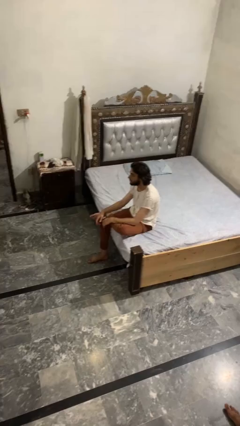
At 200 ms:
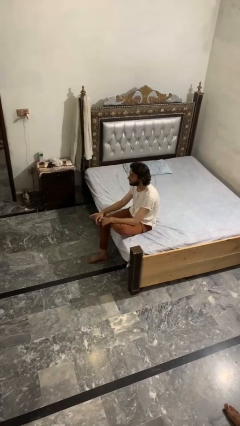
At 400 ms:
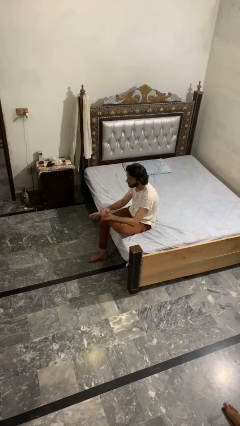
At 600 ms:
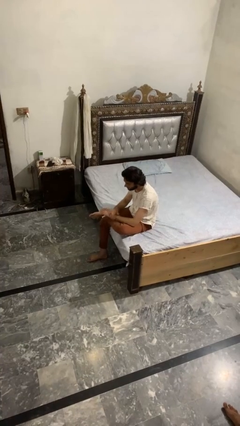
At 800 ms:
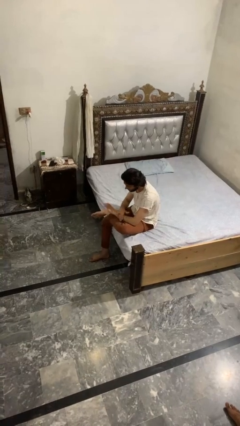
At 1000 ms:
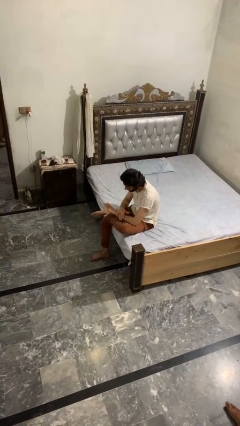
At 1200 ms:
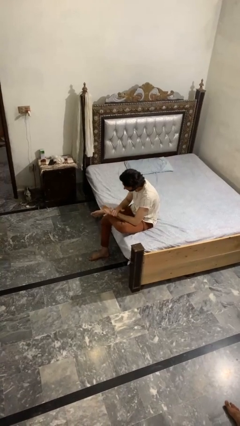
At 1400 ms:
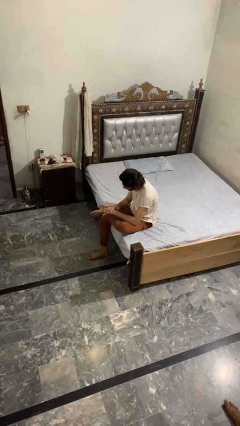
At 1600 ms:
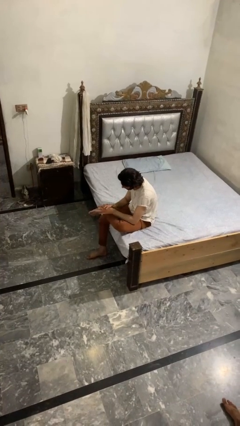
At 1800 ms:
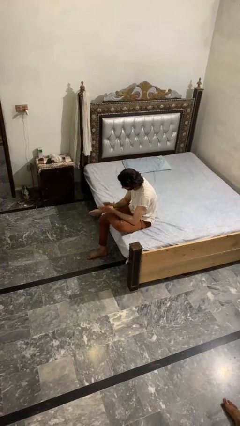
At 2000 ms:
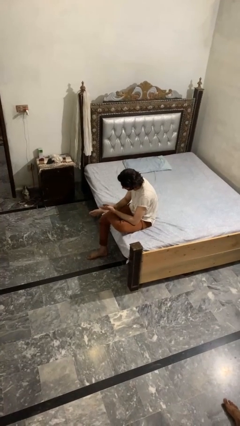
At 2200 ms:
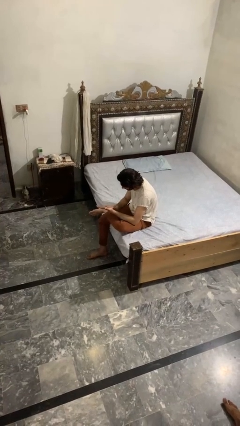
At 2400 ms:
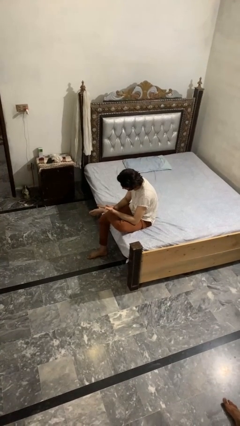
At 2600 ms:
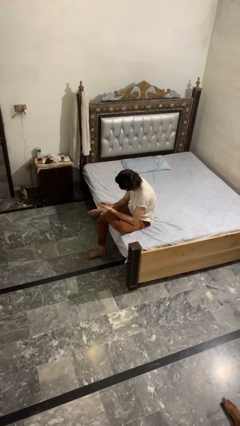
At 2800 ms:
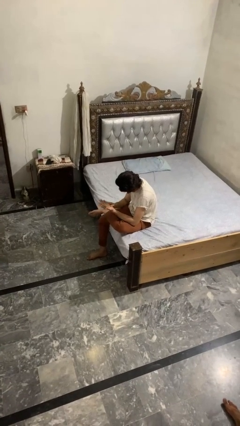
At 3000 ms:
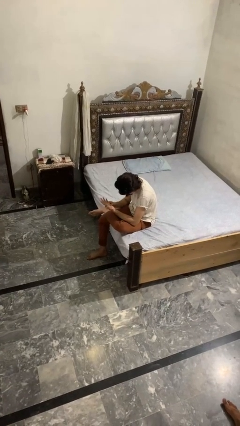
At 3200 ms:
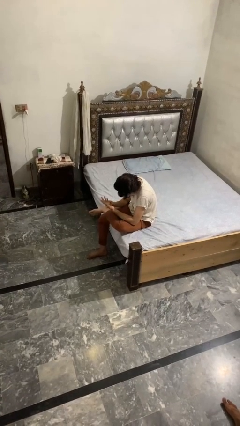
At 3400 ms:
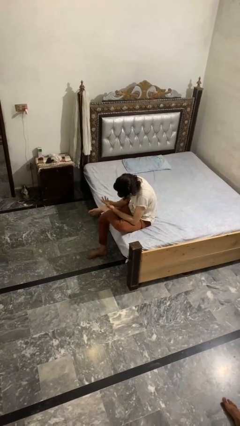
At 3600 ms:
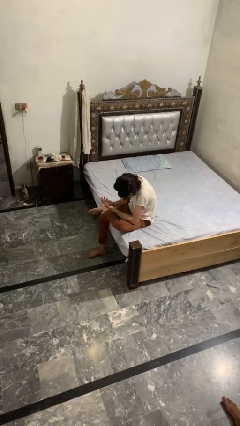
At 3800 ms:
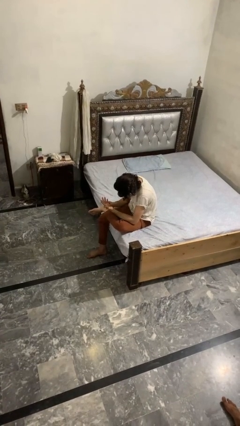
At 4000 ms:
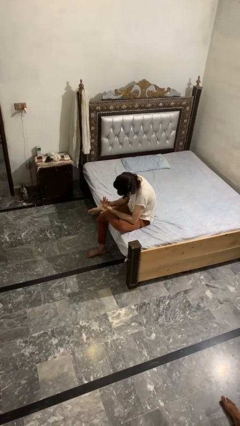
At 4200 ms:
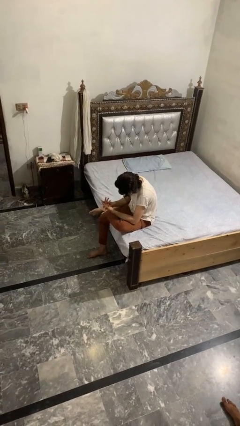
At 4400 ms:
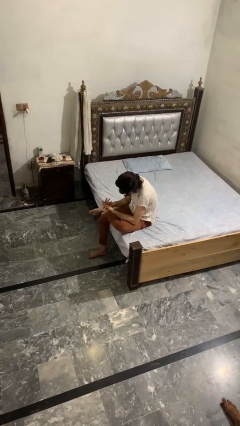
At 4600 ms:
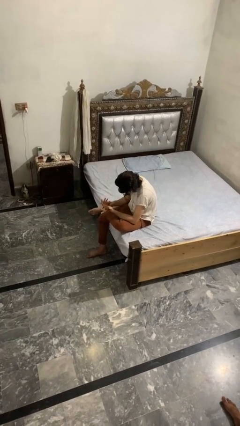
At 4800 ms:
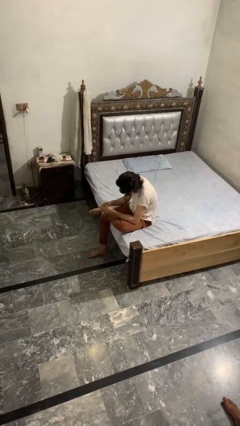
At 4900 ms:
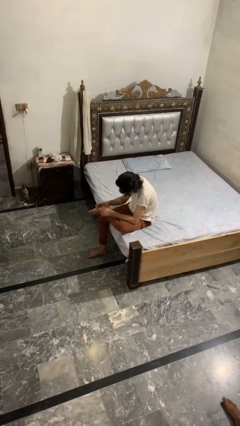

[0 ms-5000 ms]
person looks at hands in lap

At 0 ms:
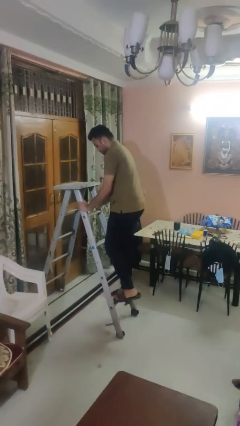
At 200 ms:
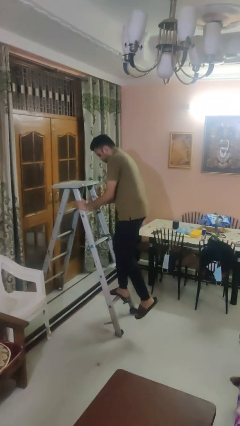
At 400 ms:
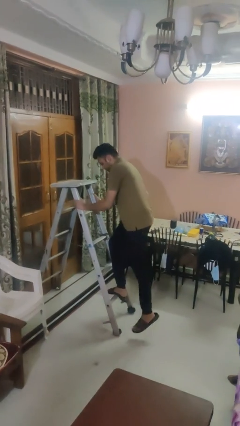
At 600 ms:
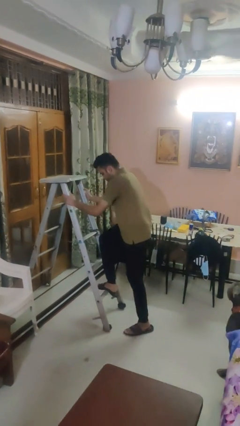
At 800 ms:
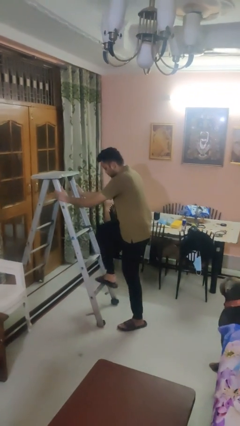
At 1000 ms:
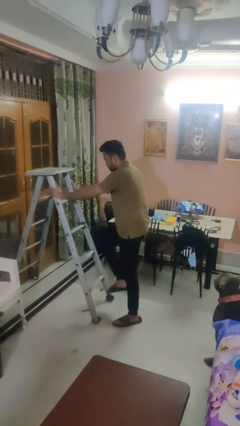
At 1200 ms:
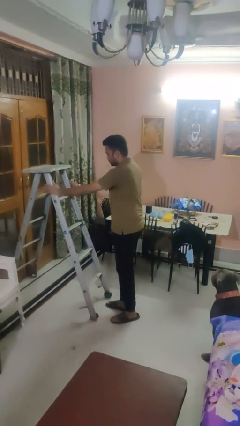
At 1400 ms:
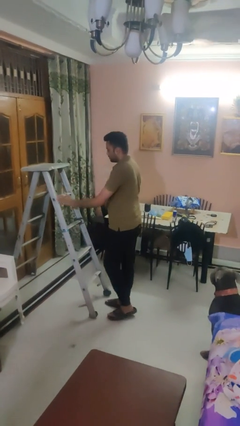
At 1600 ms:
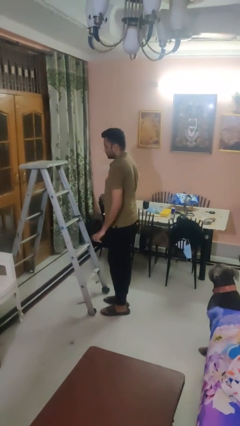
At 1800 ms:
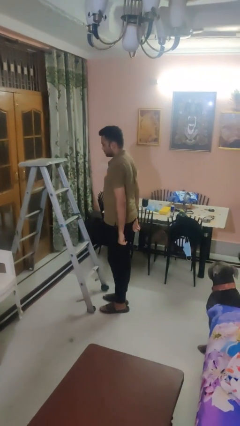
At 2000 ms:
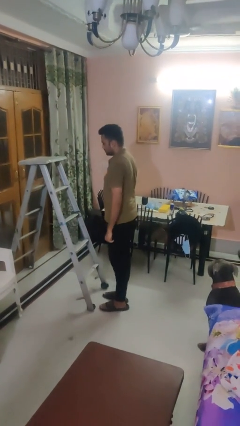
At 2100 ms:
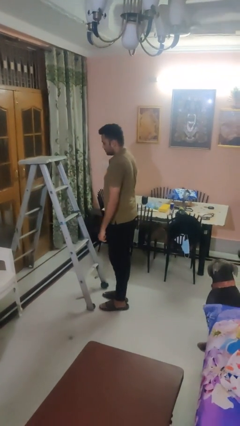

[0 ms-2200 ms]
person climbs down ladder

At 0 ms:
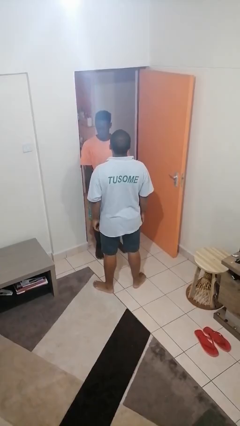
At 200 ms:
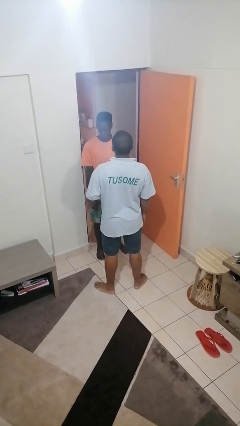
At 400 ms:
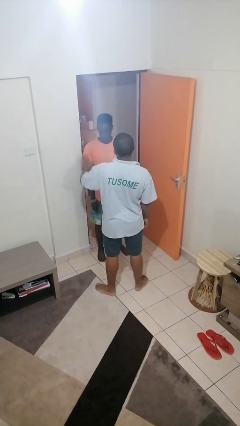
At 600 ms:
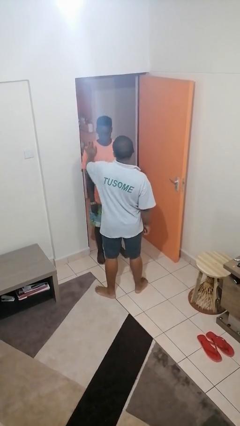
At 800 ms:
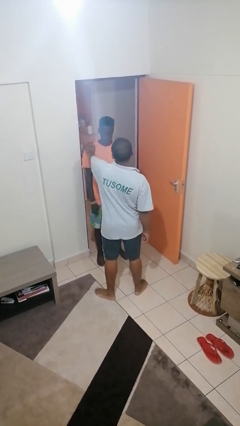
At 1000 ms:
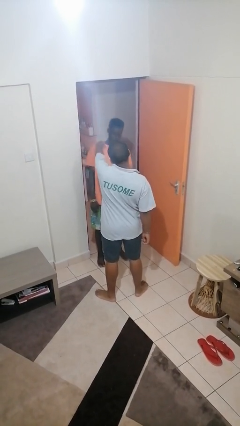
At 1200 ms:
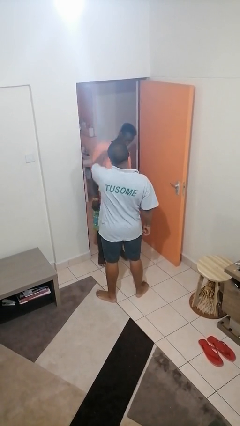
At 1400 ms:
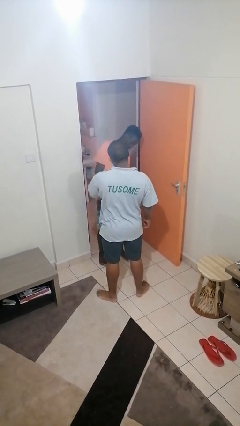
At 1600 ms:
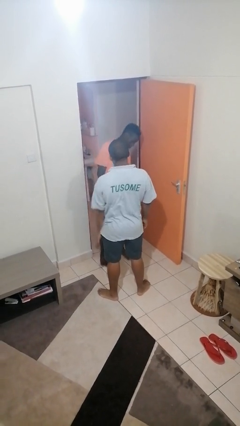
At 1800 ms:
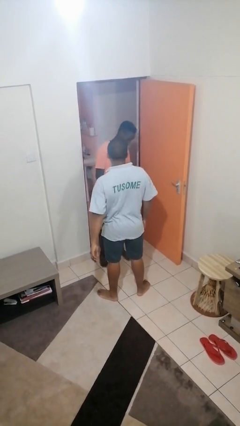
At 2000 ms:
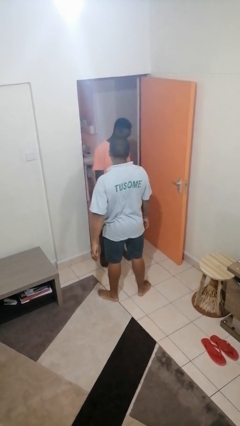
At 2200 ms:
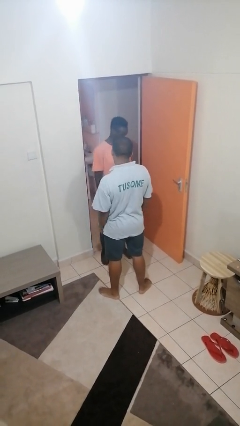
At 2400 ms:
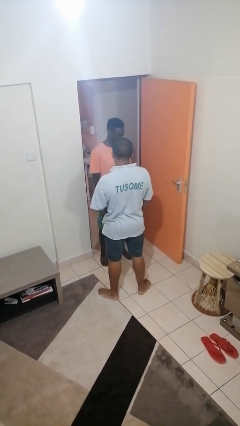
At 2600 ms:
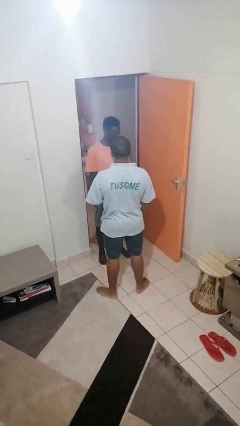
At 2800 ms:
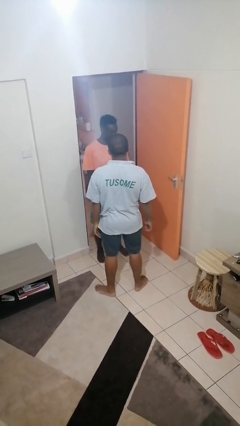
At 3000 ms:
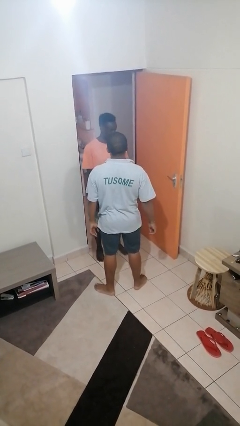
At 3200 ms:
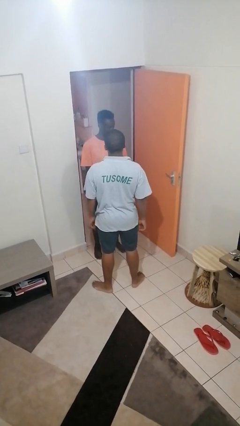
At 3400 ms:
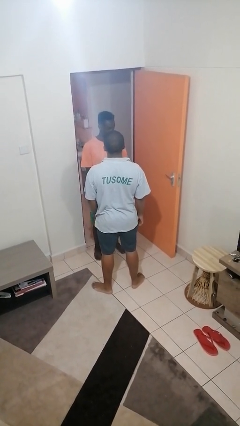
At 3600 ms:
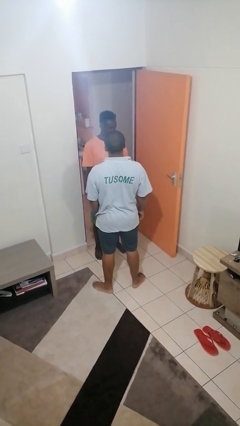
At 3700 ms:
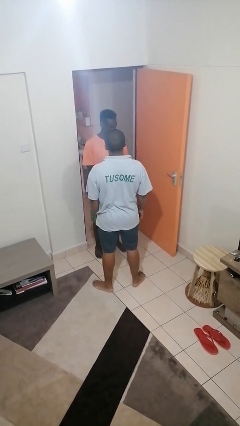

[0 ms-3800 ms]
person shoves person

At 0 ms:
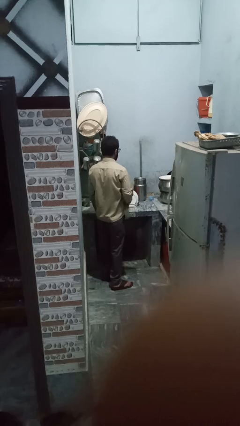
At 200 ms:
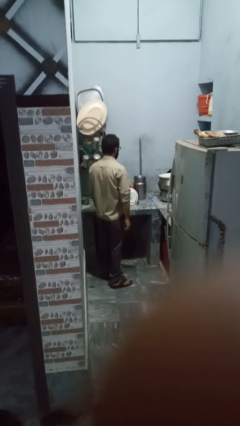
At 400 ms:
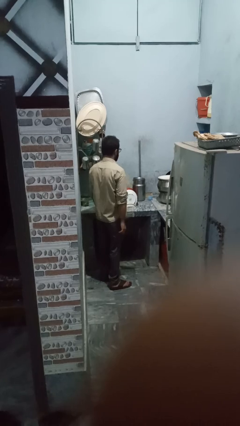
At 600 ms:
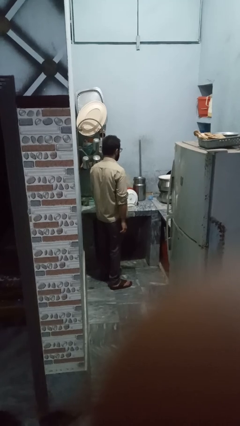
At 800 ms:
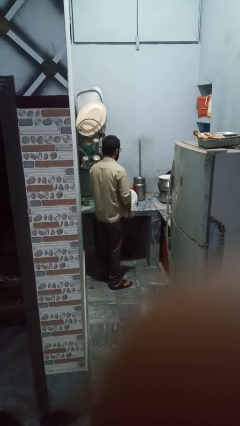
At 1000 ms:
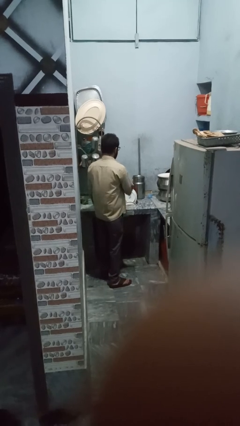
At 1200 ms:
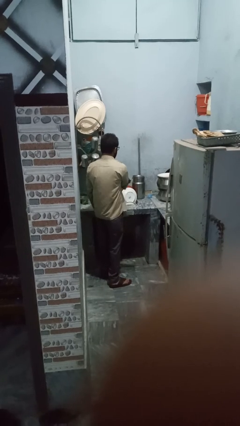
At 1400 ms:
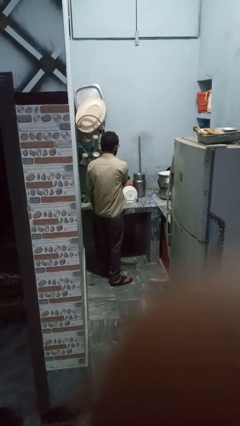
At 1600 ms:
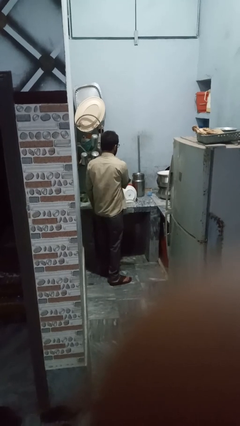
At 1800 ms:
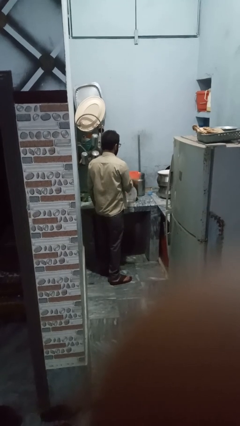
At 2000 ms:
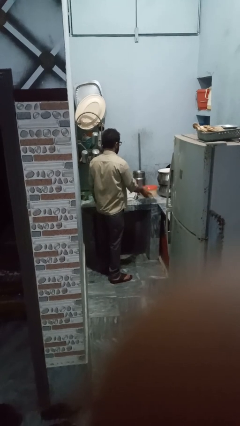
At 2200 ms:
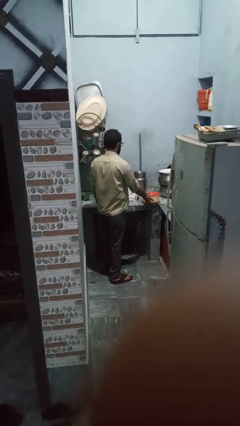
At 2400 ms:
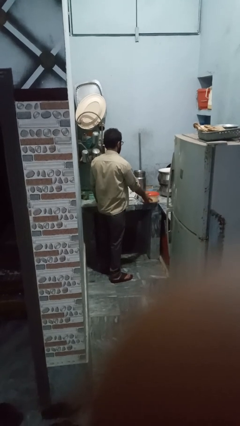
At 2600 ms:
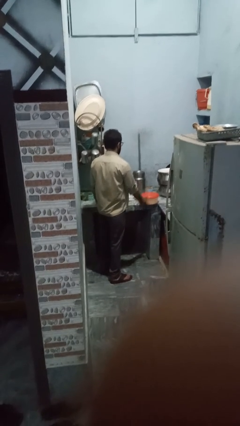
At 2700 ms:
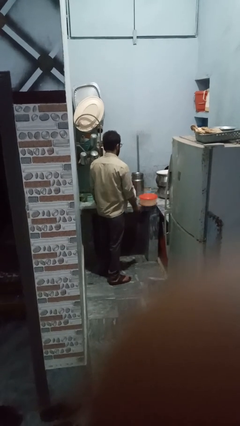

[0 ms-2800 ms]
person unloads dishwasher

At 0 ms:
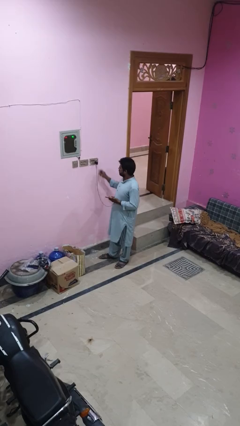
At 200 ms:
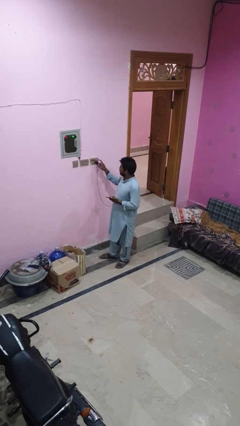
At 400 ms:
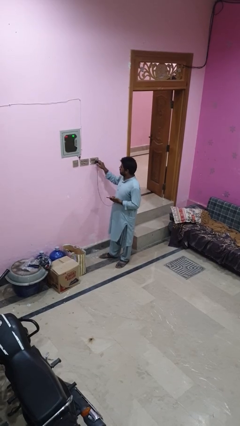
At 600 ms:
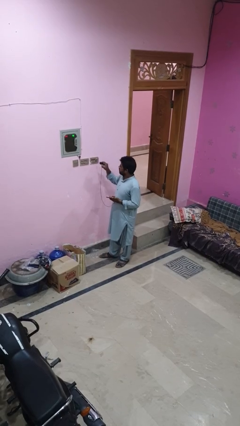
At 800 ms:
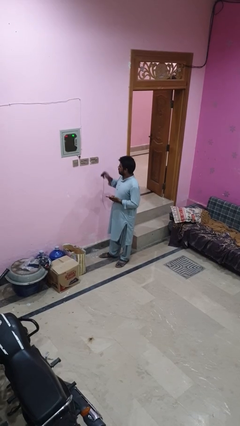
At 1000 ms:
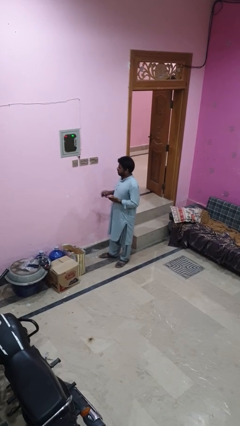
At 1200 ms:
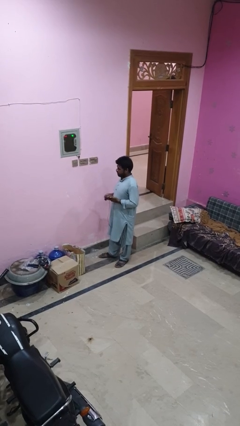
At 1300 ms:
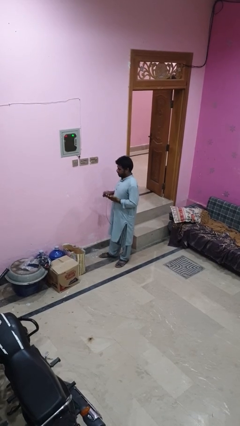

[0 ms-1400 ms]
person unplugs from electrical socket

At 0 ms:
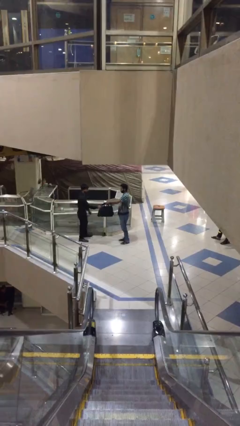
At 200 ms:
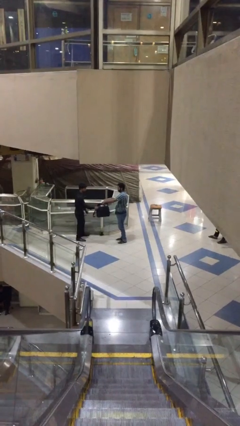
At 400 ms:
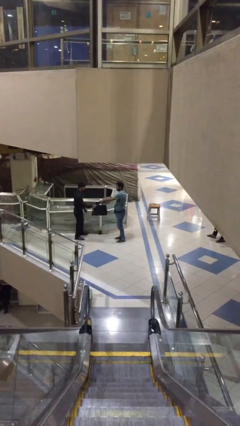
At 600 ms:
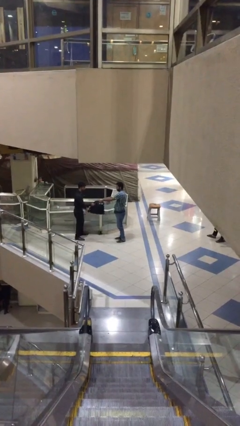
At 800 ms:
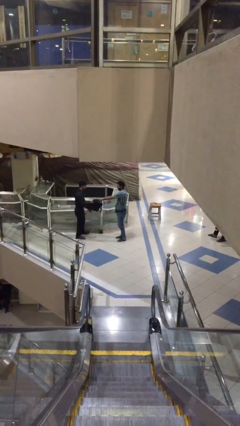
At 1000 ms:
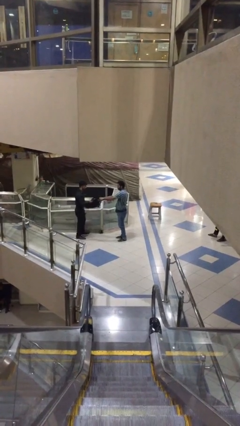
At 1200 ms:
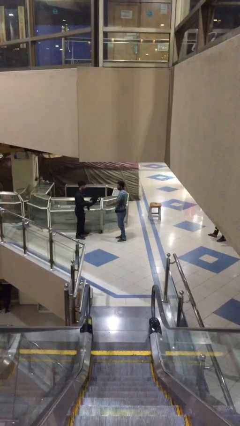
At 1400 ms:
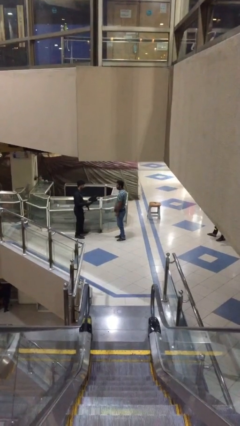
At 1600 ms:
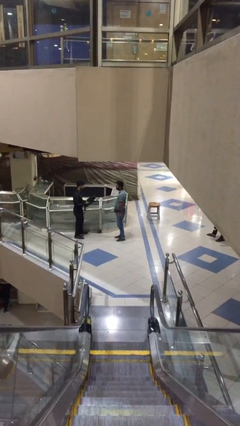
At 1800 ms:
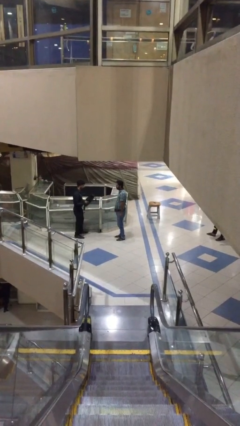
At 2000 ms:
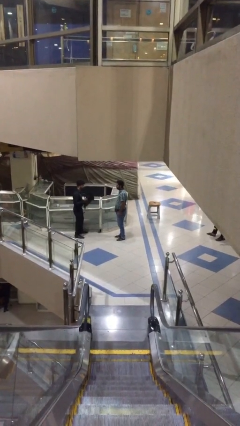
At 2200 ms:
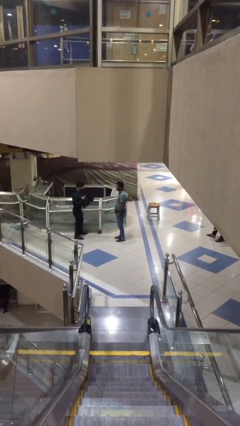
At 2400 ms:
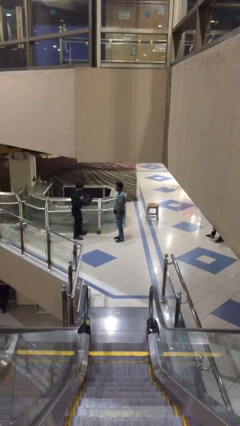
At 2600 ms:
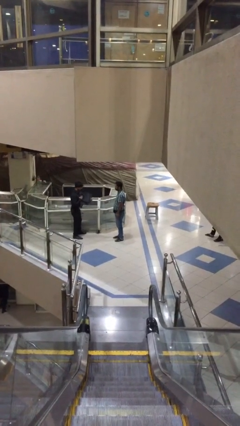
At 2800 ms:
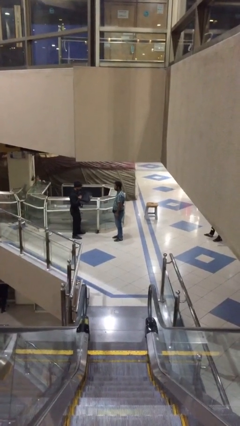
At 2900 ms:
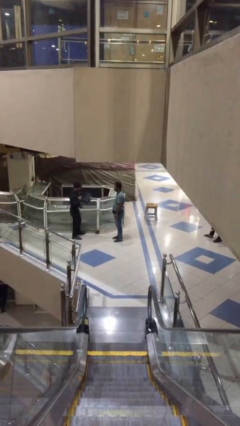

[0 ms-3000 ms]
person transfers object to person
